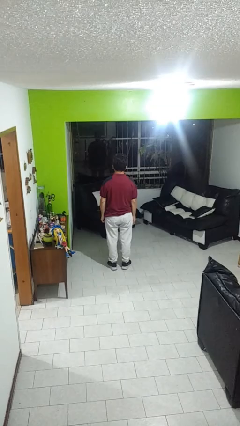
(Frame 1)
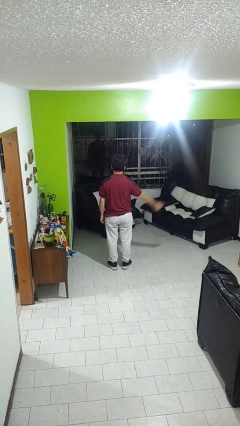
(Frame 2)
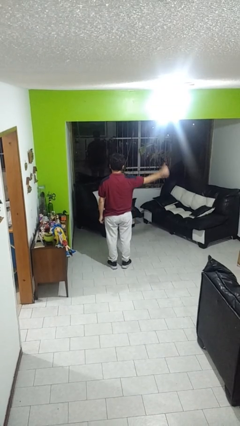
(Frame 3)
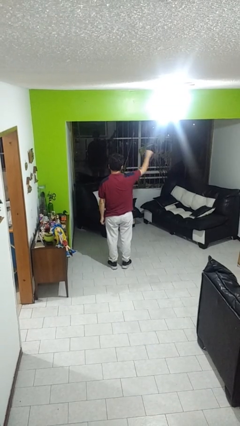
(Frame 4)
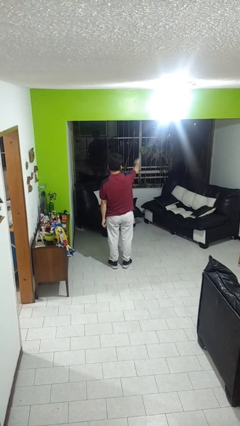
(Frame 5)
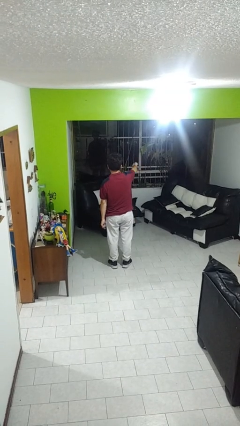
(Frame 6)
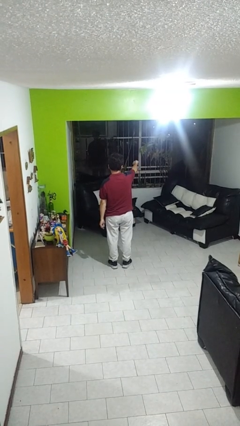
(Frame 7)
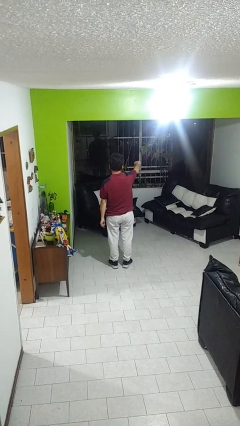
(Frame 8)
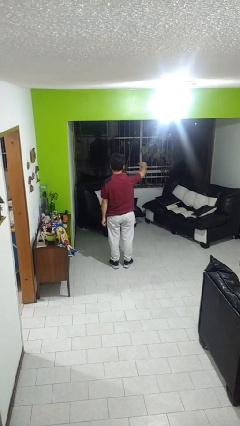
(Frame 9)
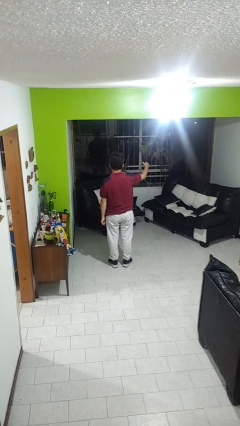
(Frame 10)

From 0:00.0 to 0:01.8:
person gestures thumbs down

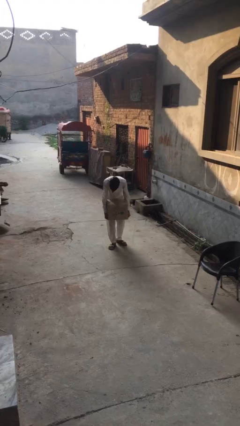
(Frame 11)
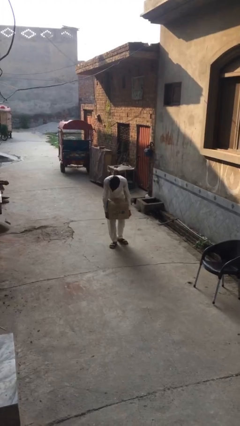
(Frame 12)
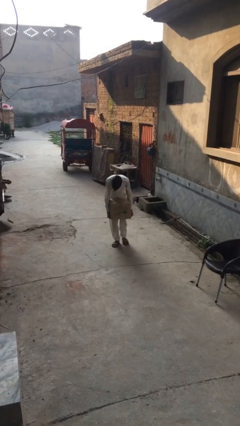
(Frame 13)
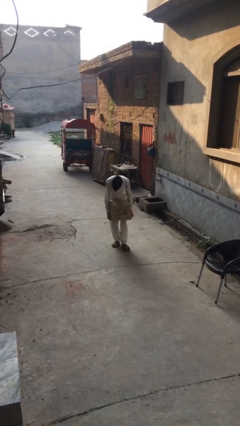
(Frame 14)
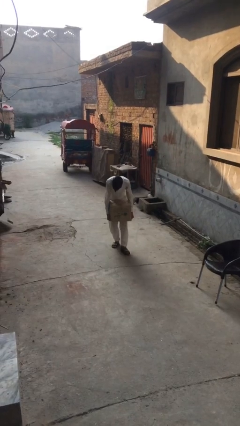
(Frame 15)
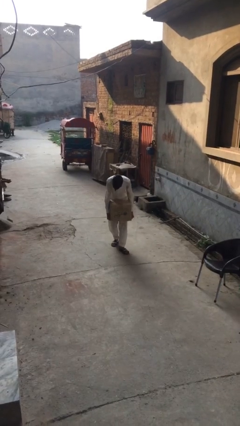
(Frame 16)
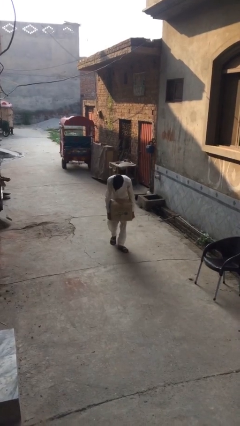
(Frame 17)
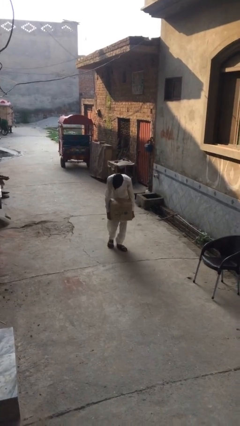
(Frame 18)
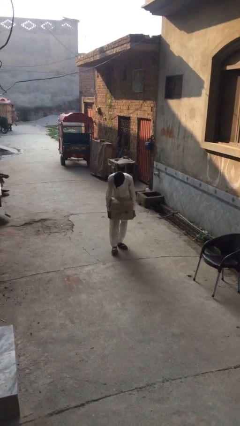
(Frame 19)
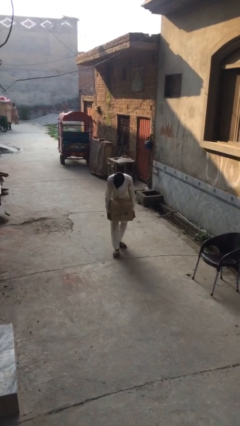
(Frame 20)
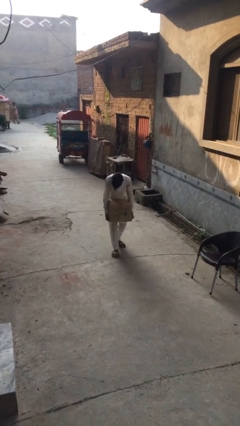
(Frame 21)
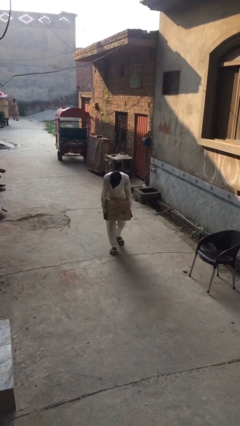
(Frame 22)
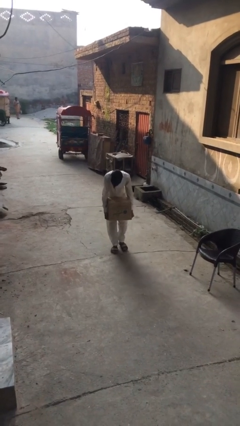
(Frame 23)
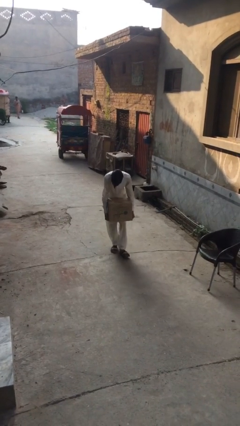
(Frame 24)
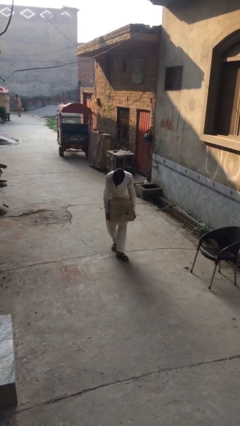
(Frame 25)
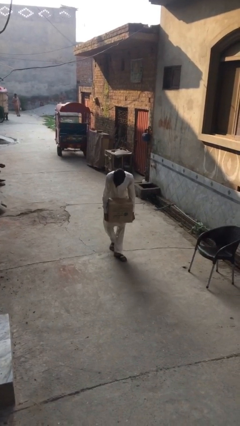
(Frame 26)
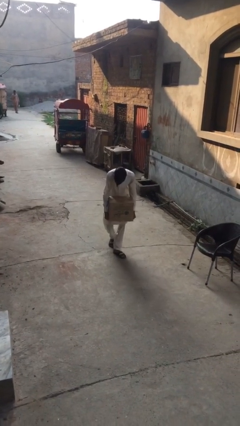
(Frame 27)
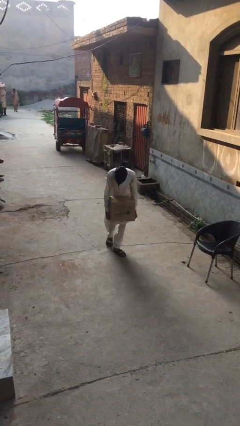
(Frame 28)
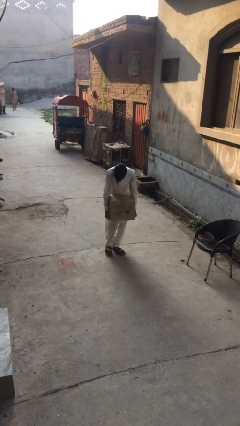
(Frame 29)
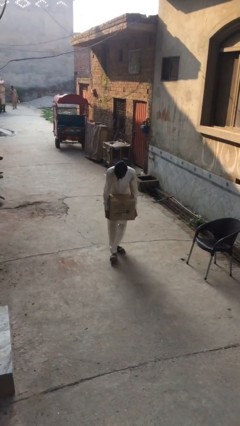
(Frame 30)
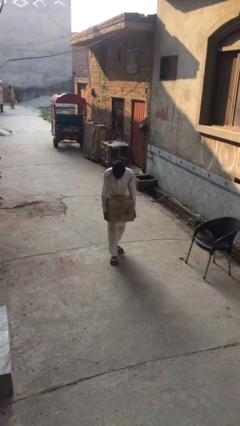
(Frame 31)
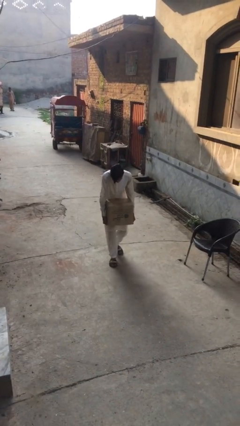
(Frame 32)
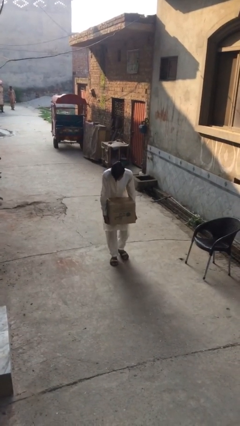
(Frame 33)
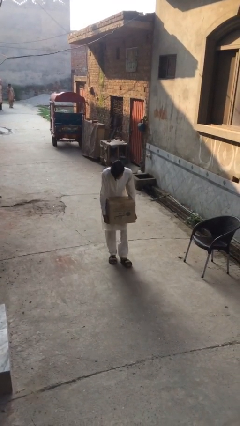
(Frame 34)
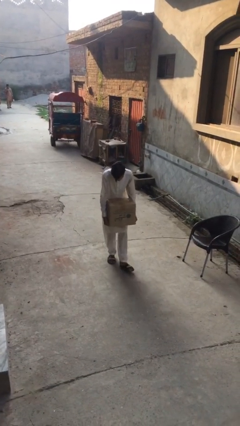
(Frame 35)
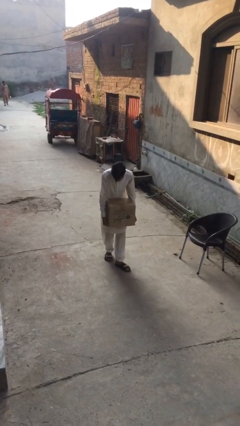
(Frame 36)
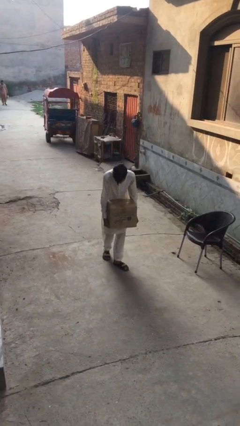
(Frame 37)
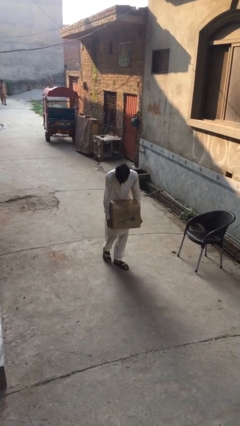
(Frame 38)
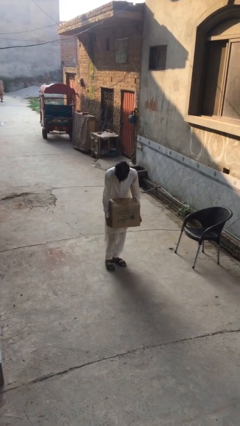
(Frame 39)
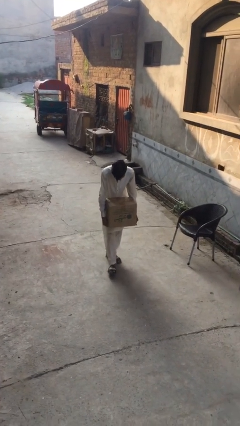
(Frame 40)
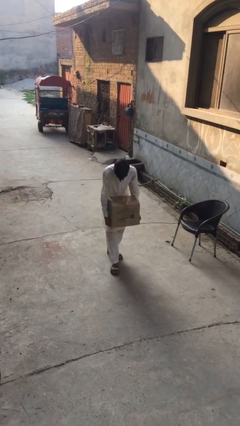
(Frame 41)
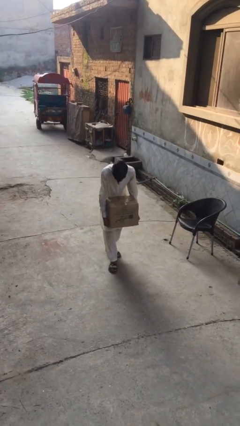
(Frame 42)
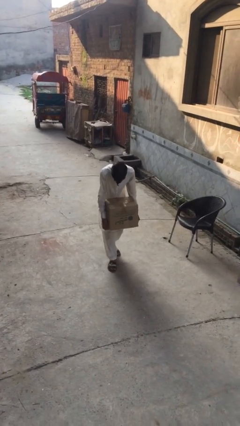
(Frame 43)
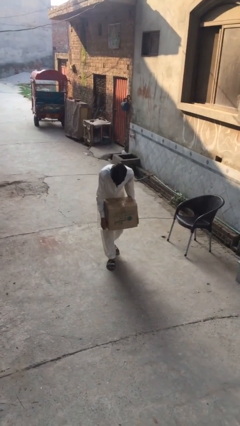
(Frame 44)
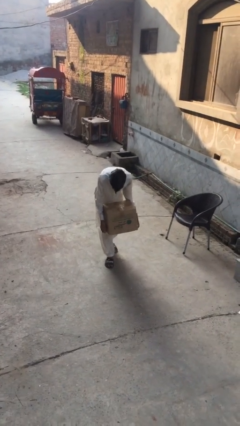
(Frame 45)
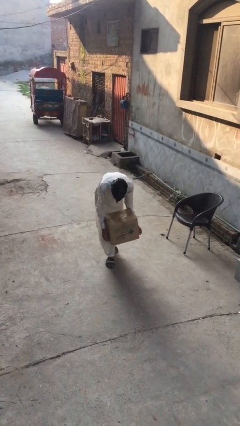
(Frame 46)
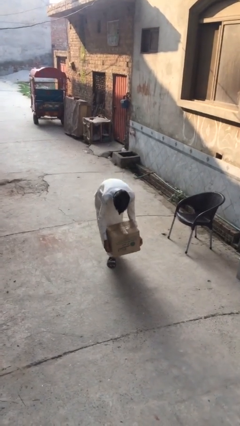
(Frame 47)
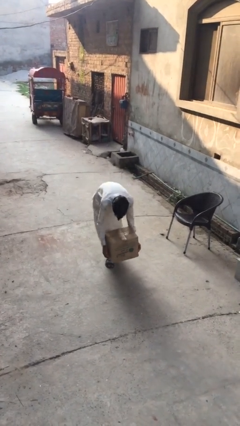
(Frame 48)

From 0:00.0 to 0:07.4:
person carries heavy object

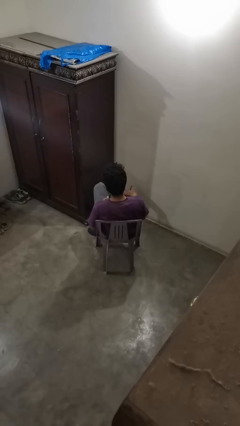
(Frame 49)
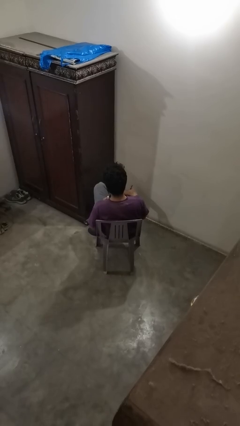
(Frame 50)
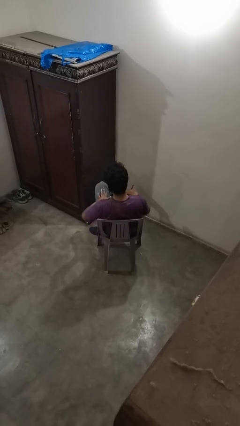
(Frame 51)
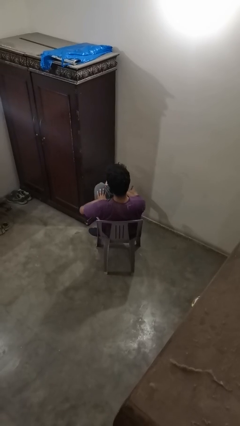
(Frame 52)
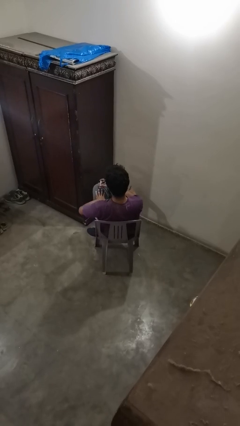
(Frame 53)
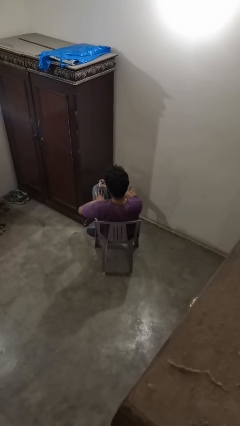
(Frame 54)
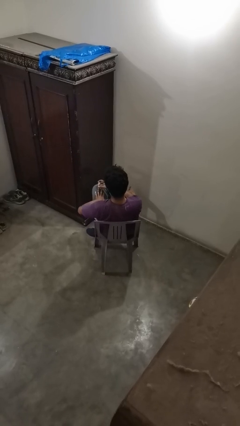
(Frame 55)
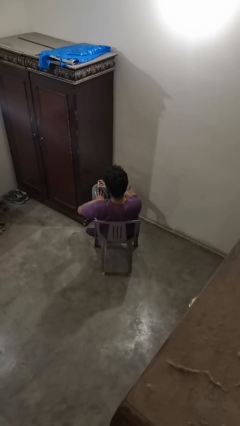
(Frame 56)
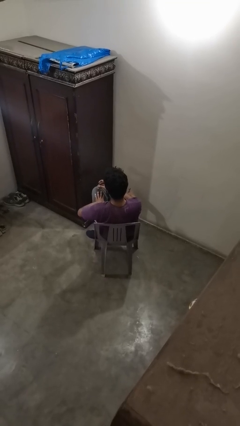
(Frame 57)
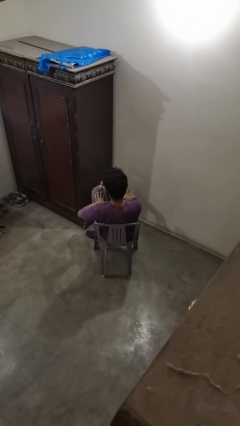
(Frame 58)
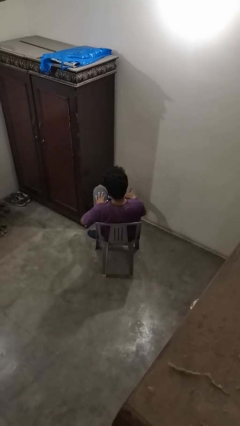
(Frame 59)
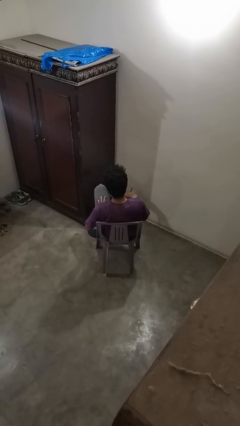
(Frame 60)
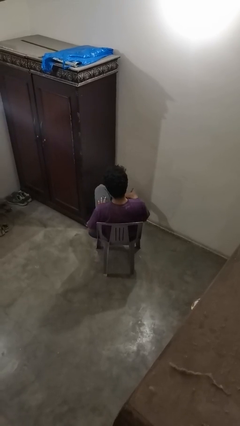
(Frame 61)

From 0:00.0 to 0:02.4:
person clips fingernails

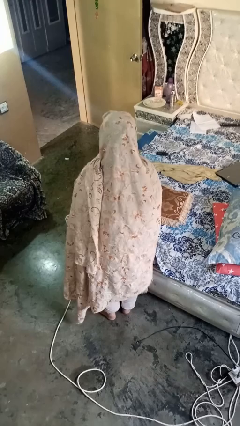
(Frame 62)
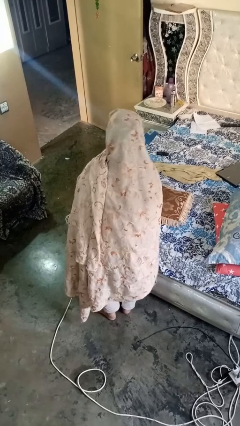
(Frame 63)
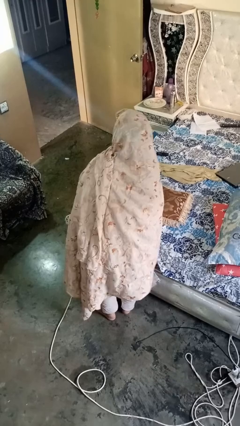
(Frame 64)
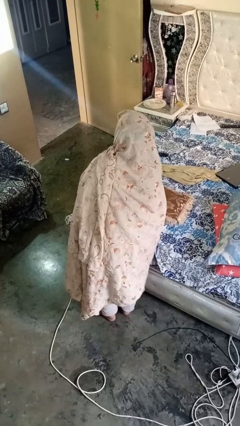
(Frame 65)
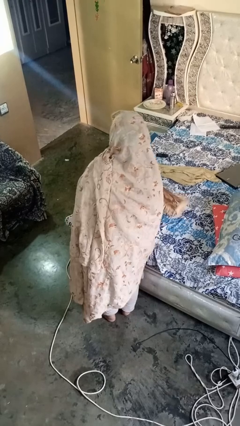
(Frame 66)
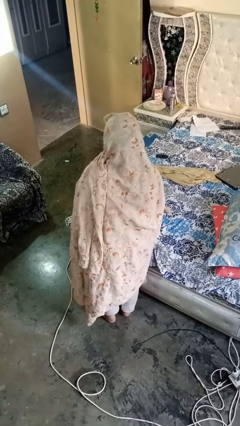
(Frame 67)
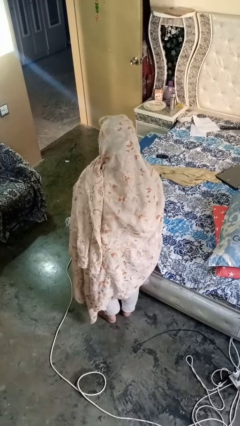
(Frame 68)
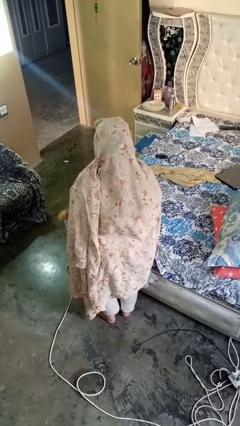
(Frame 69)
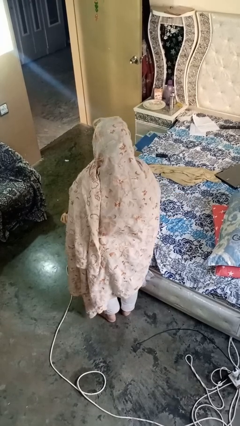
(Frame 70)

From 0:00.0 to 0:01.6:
person picks up object from bed

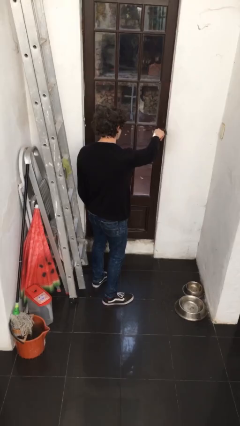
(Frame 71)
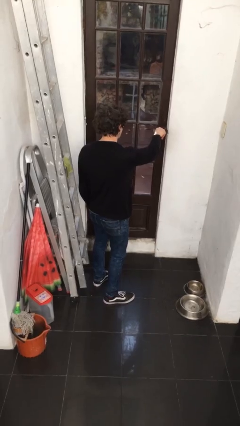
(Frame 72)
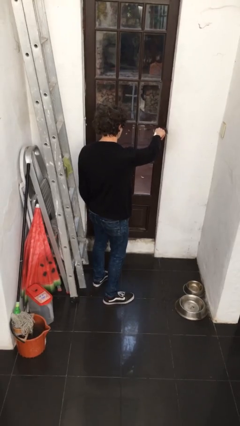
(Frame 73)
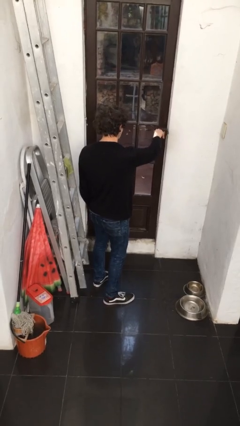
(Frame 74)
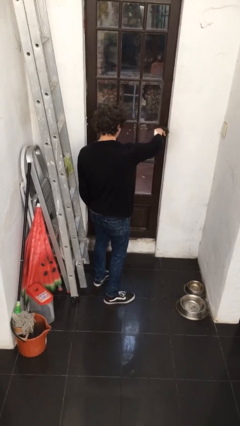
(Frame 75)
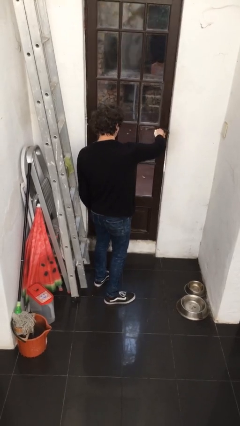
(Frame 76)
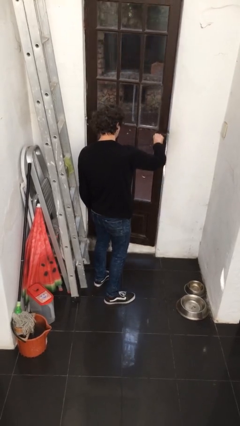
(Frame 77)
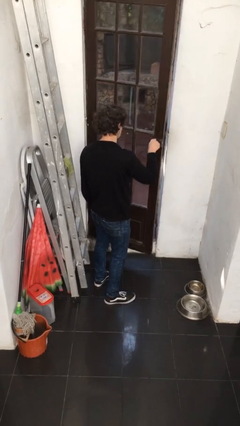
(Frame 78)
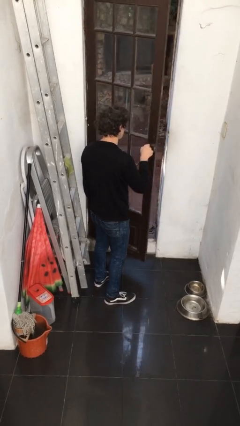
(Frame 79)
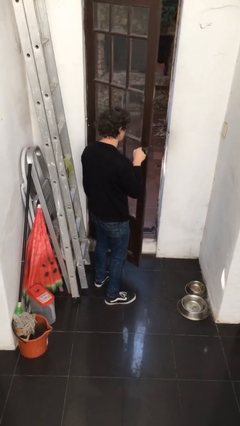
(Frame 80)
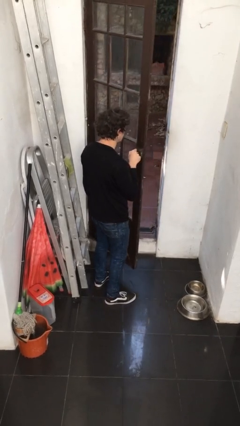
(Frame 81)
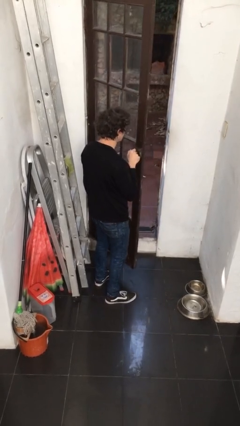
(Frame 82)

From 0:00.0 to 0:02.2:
person opens facility door

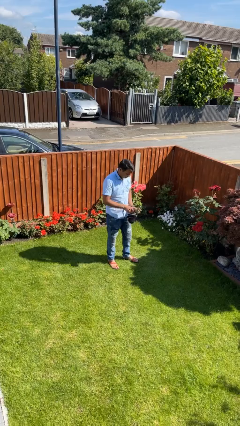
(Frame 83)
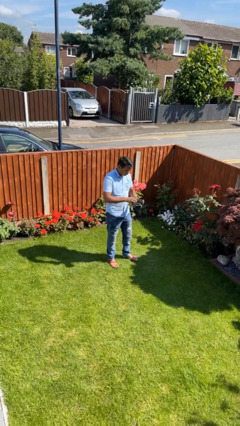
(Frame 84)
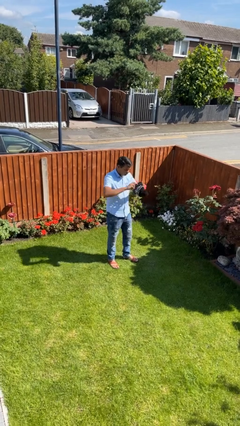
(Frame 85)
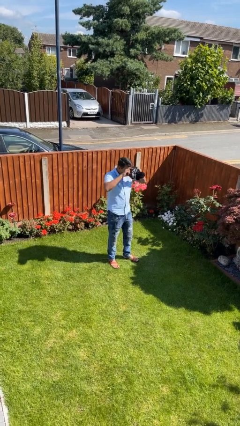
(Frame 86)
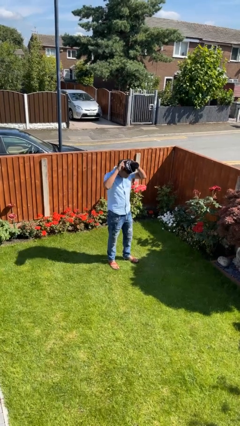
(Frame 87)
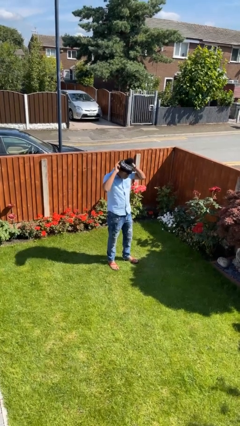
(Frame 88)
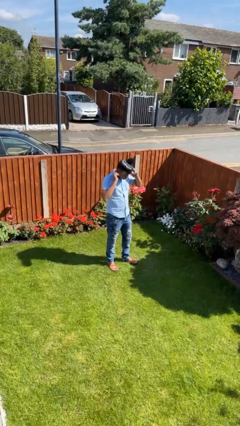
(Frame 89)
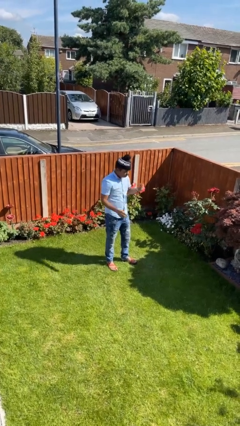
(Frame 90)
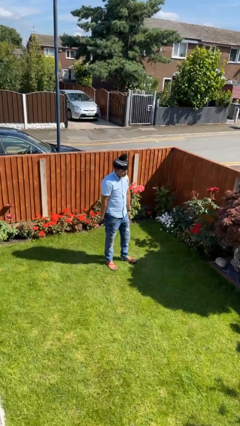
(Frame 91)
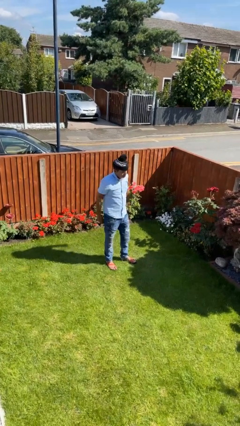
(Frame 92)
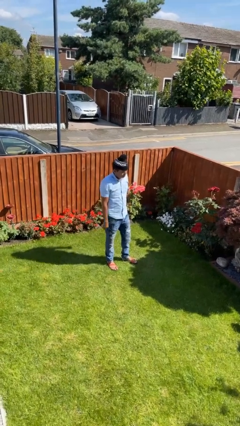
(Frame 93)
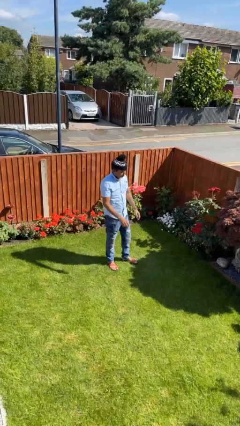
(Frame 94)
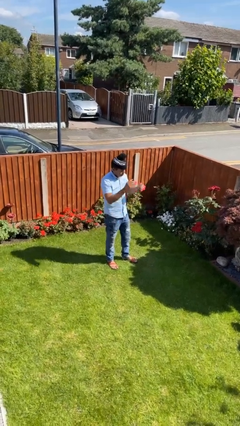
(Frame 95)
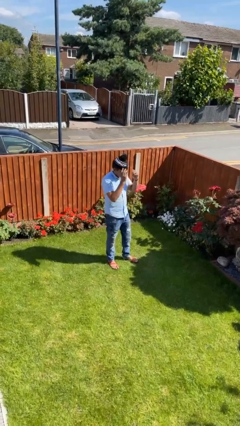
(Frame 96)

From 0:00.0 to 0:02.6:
person puts on hat
